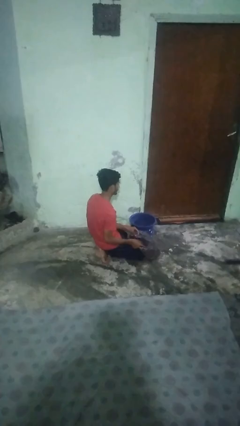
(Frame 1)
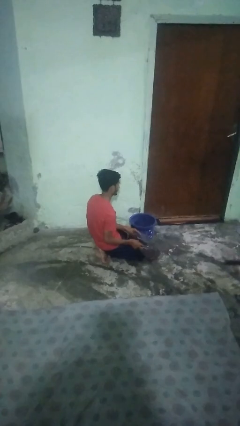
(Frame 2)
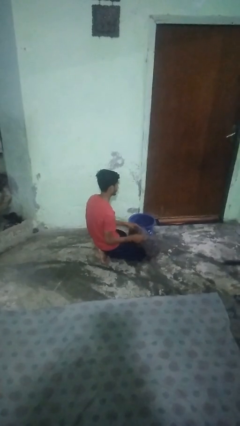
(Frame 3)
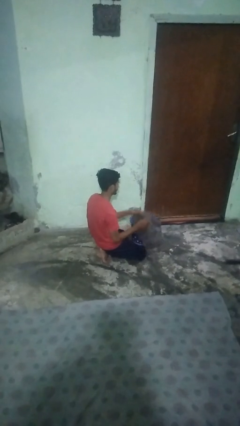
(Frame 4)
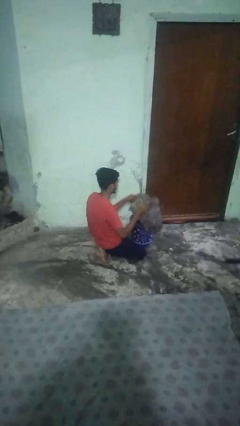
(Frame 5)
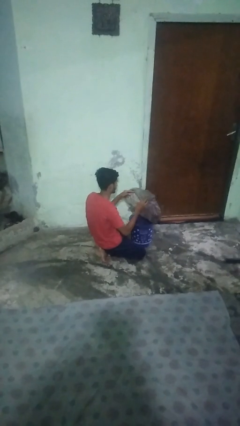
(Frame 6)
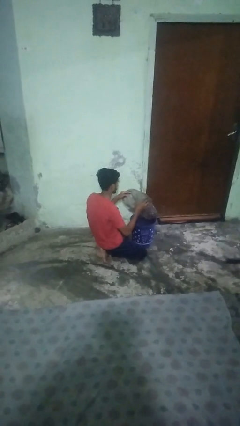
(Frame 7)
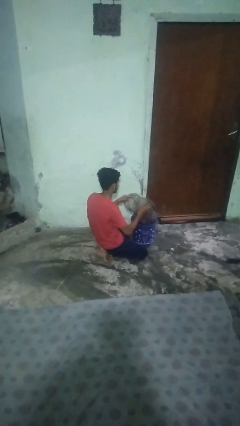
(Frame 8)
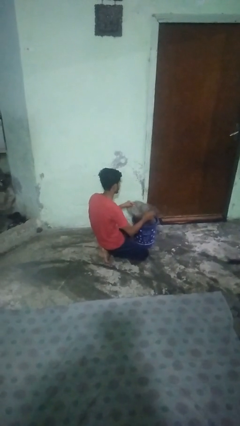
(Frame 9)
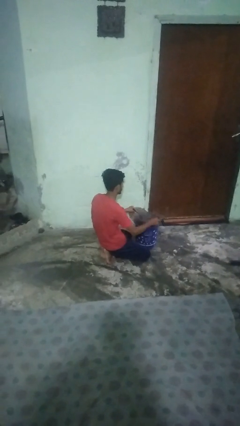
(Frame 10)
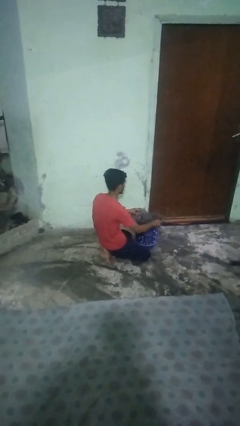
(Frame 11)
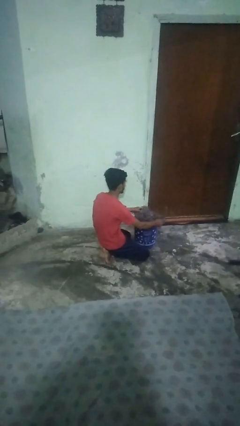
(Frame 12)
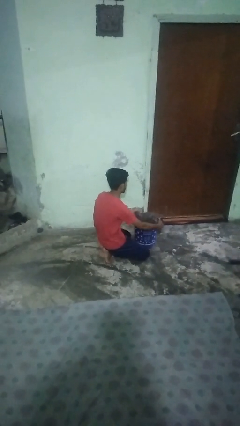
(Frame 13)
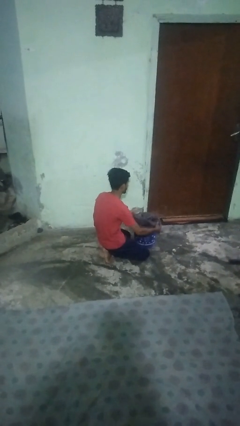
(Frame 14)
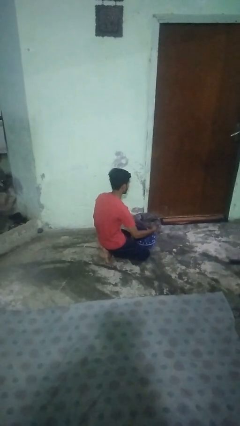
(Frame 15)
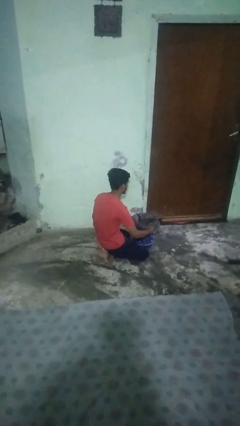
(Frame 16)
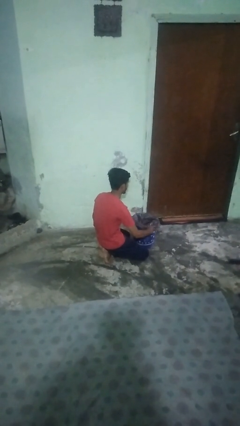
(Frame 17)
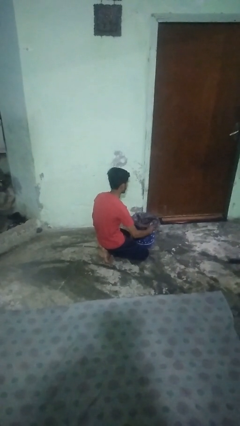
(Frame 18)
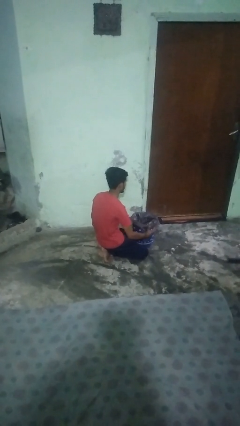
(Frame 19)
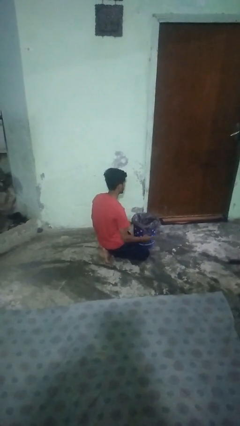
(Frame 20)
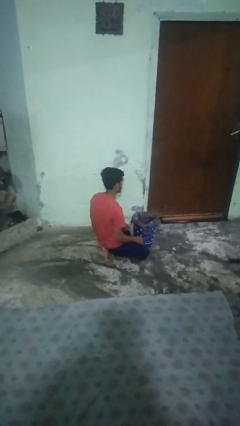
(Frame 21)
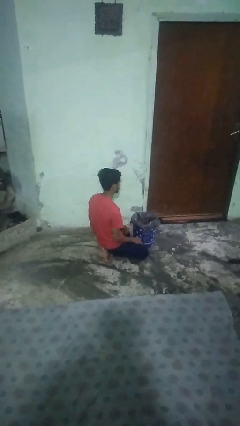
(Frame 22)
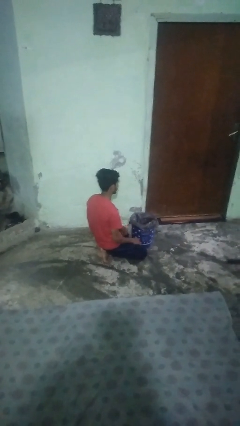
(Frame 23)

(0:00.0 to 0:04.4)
person inserts trashbag into trashcan

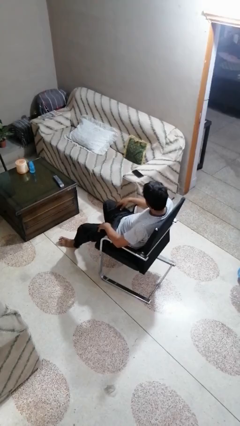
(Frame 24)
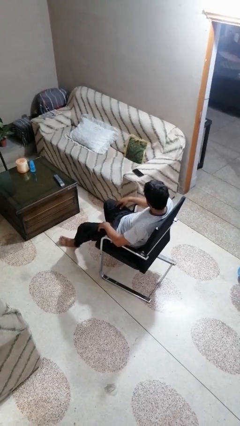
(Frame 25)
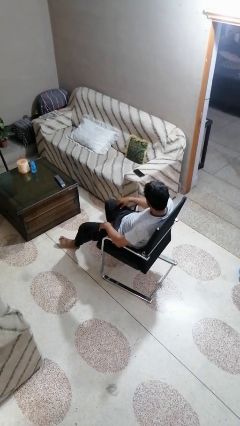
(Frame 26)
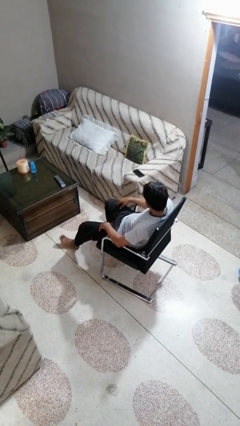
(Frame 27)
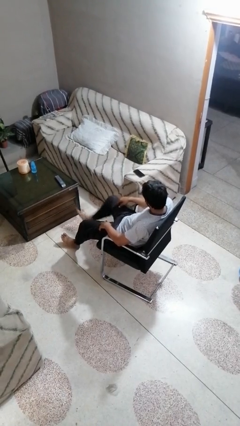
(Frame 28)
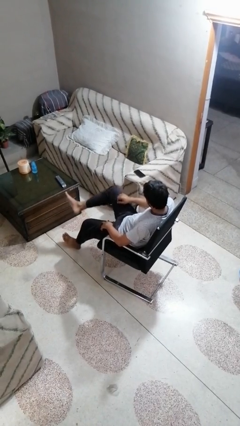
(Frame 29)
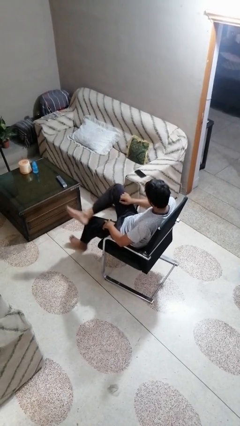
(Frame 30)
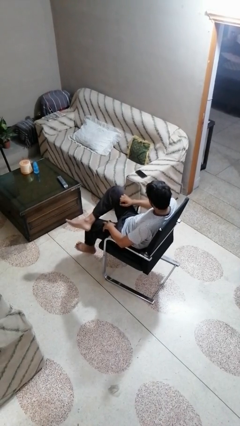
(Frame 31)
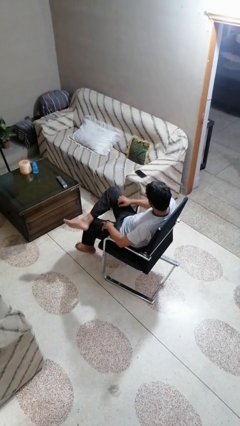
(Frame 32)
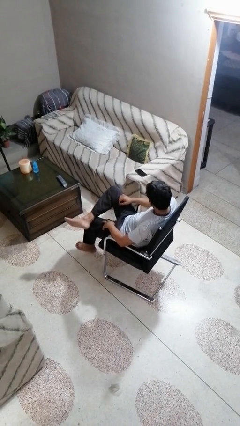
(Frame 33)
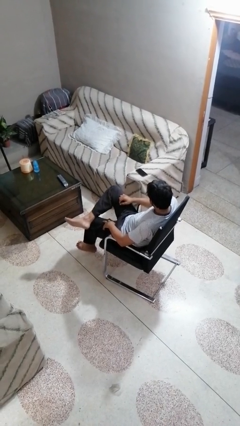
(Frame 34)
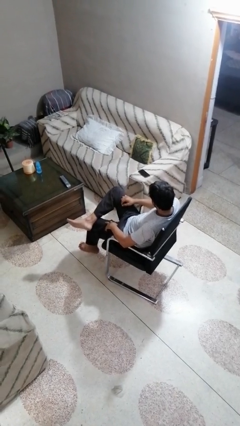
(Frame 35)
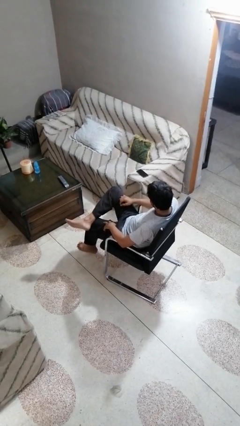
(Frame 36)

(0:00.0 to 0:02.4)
person crosses legs

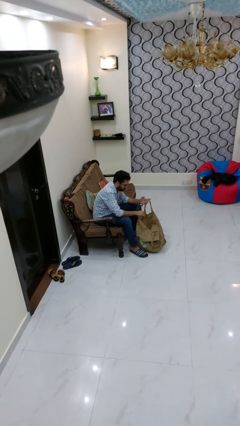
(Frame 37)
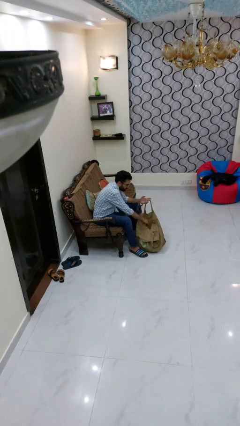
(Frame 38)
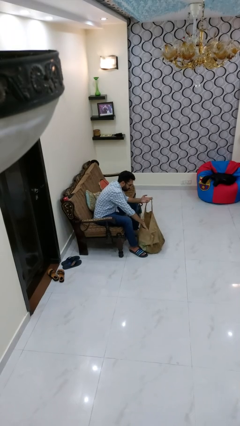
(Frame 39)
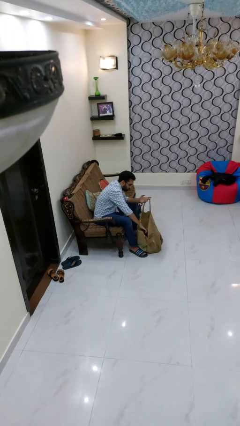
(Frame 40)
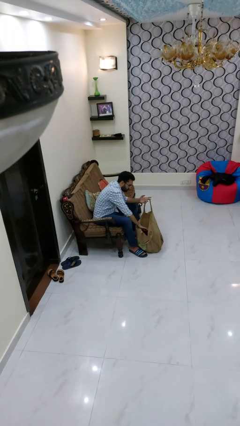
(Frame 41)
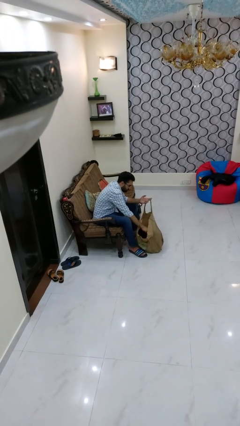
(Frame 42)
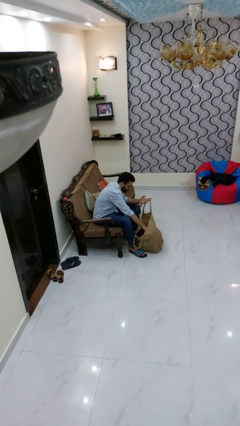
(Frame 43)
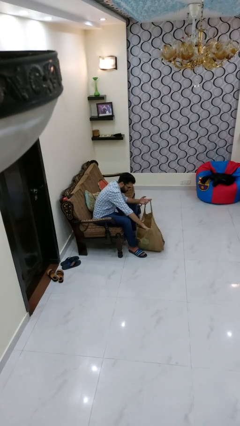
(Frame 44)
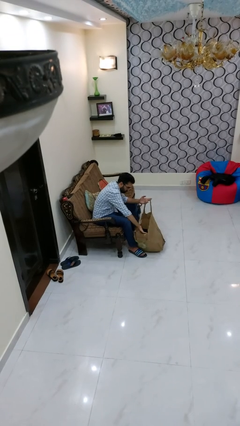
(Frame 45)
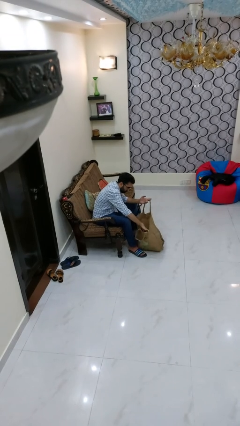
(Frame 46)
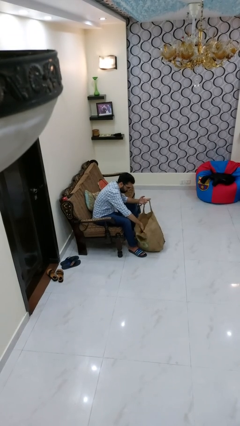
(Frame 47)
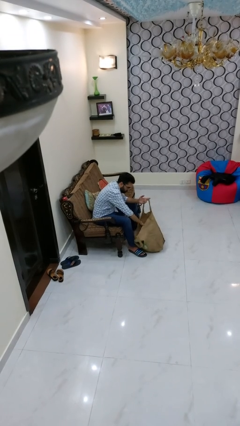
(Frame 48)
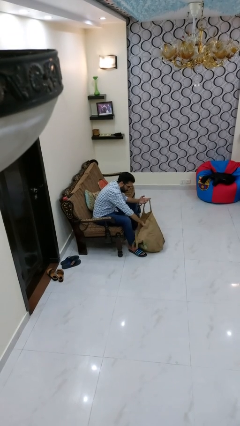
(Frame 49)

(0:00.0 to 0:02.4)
person searches in bag

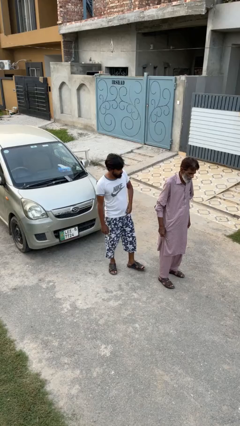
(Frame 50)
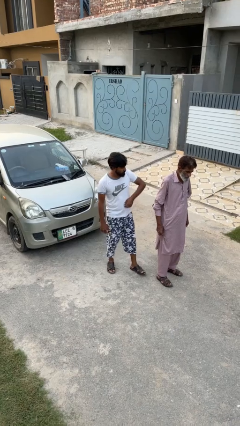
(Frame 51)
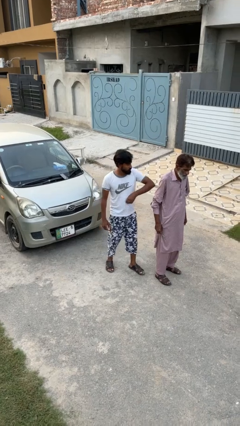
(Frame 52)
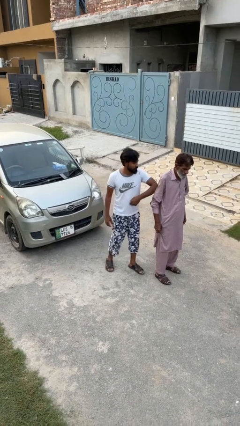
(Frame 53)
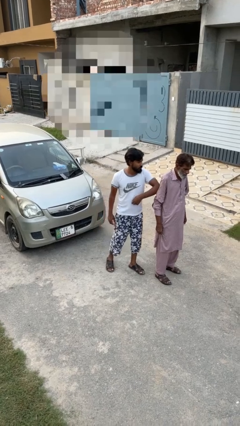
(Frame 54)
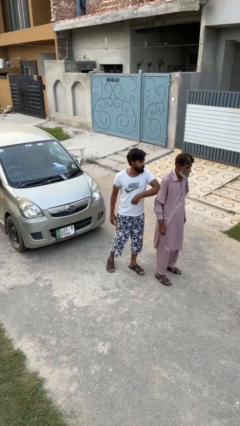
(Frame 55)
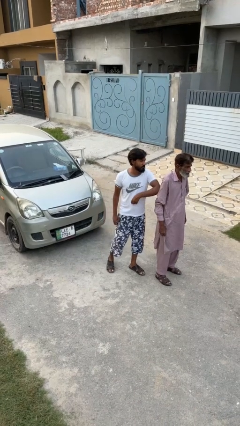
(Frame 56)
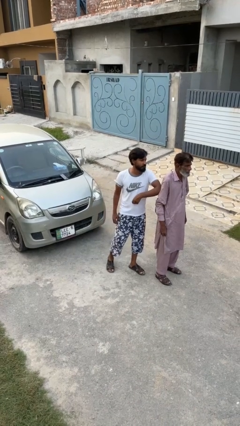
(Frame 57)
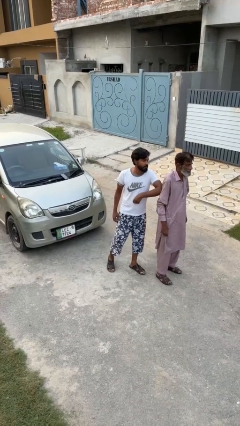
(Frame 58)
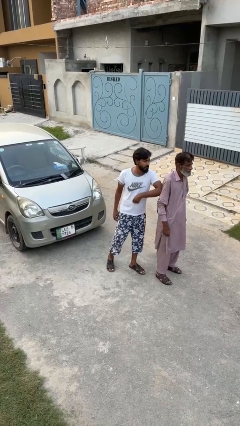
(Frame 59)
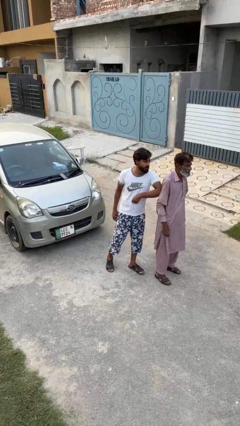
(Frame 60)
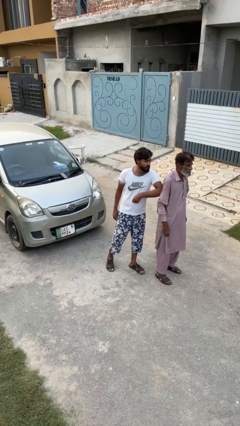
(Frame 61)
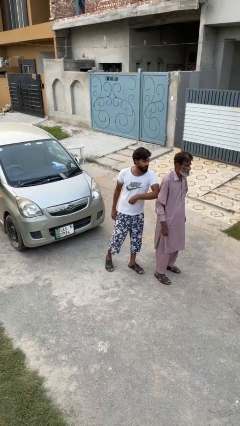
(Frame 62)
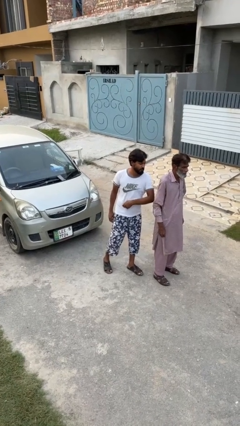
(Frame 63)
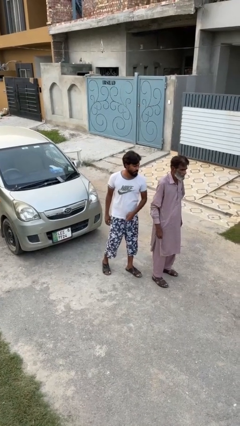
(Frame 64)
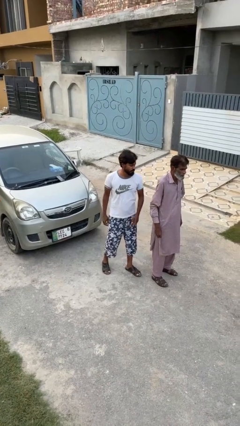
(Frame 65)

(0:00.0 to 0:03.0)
person nudges person with elbow

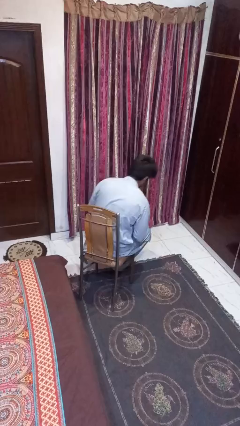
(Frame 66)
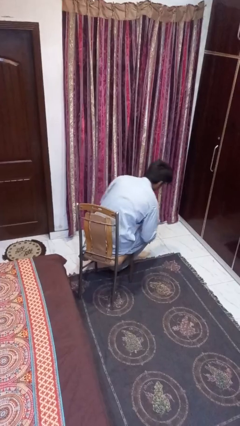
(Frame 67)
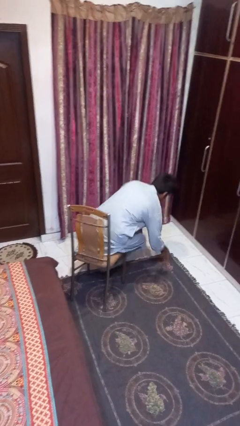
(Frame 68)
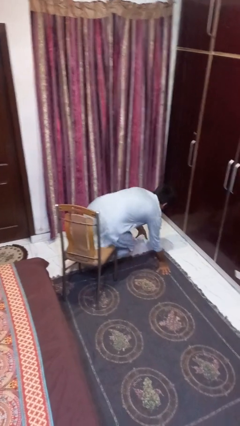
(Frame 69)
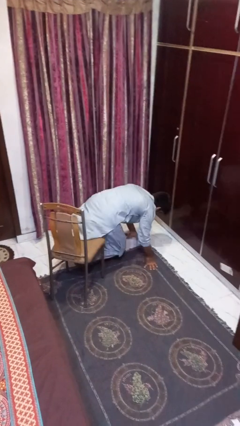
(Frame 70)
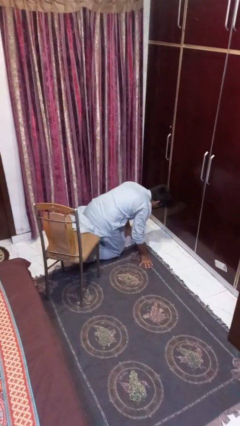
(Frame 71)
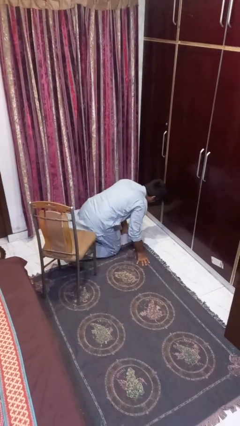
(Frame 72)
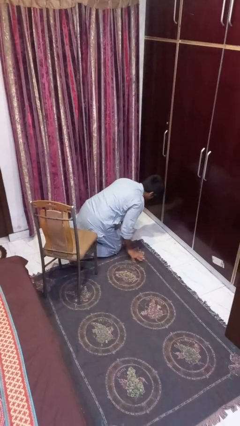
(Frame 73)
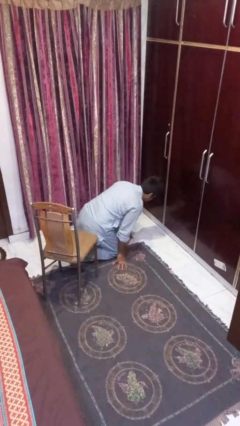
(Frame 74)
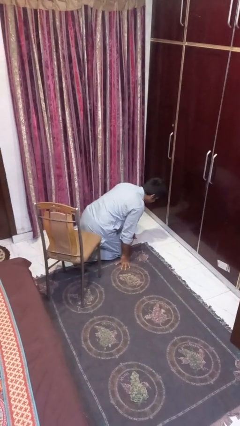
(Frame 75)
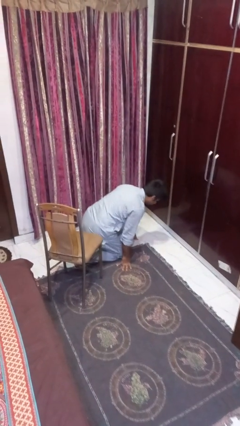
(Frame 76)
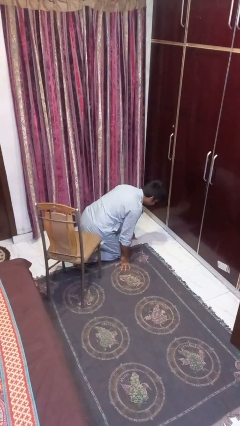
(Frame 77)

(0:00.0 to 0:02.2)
person falls from chair

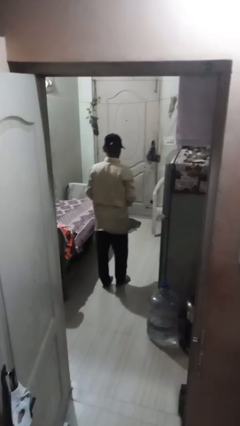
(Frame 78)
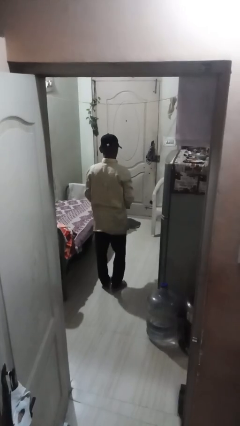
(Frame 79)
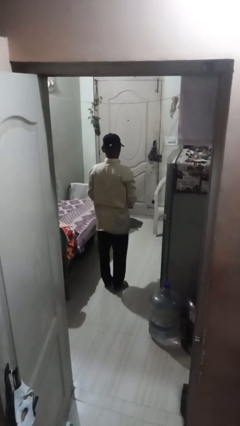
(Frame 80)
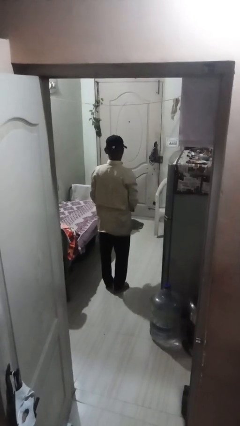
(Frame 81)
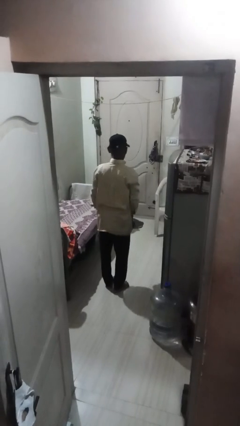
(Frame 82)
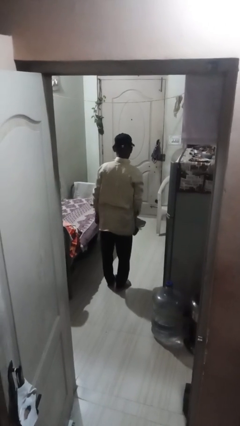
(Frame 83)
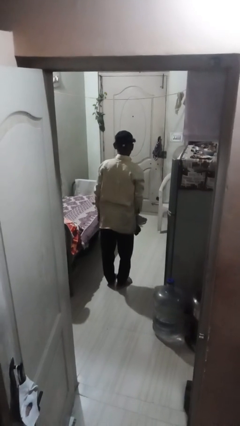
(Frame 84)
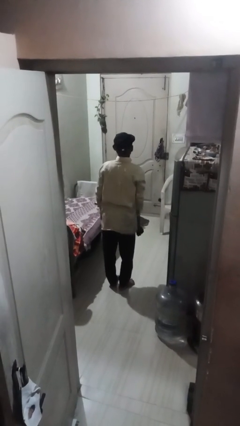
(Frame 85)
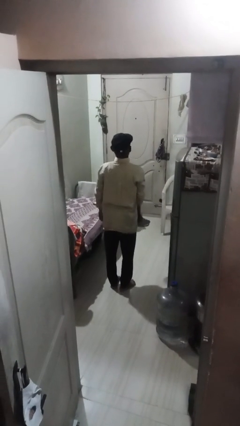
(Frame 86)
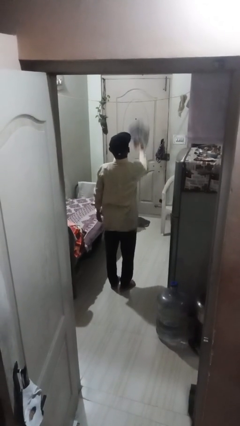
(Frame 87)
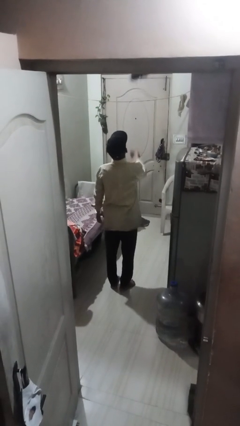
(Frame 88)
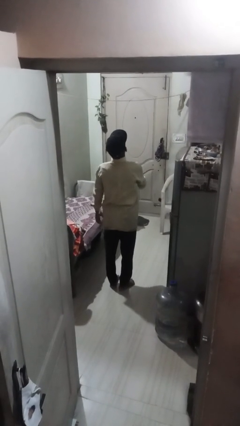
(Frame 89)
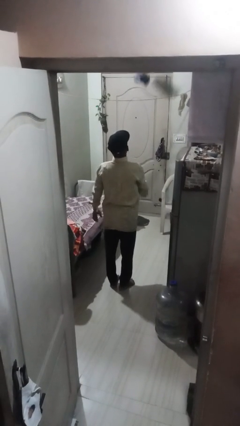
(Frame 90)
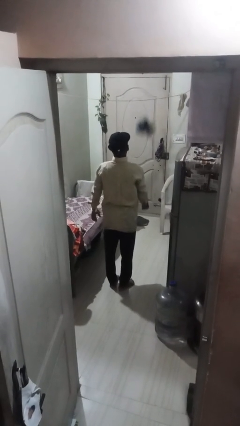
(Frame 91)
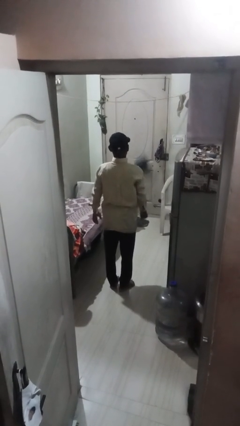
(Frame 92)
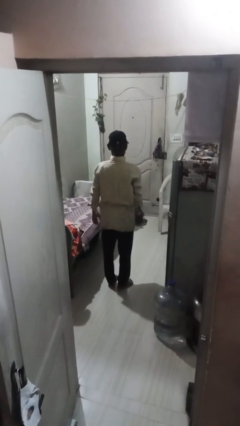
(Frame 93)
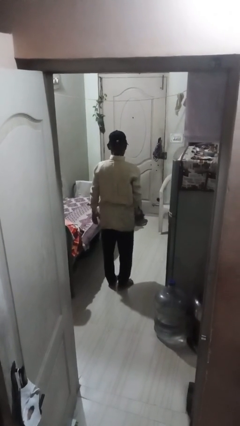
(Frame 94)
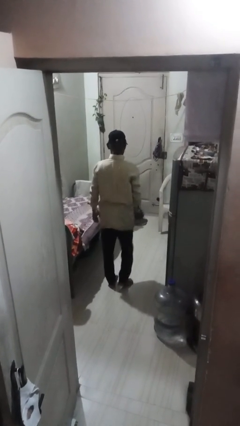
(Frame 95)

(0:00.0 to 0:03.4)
person throws object into air
